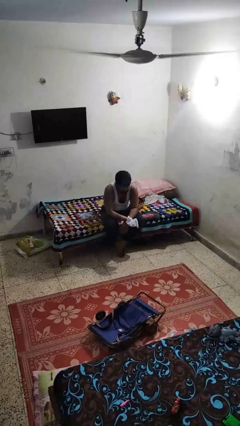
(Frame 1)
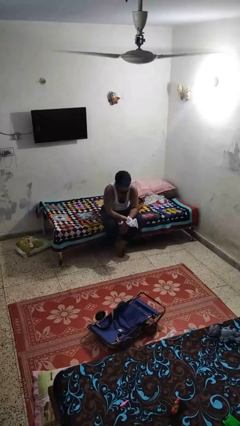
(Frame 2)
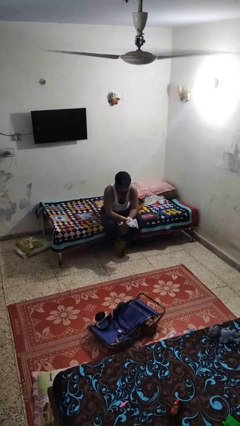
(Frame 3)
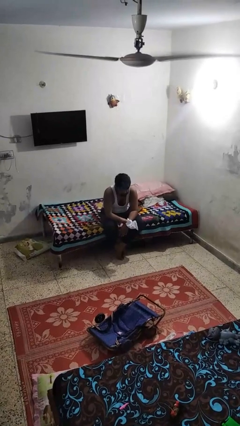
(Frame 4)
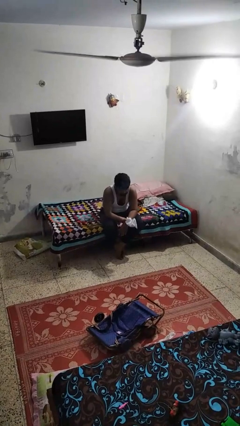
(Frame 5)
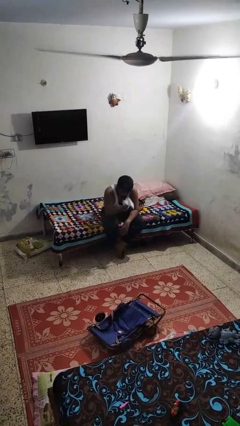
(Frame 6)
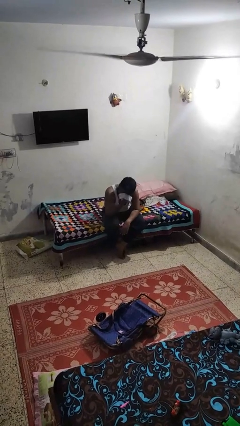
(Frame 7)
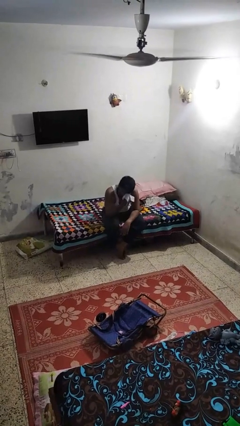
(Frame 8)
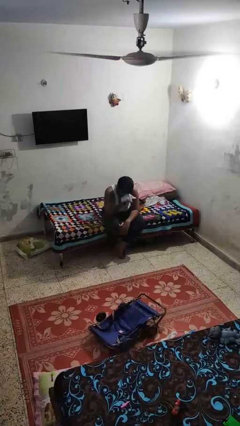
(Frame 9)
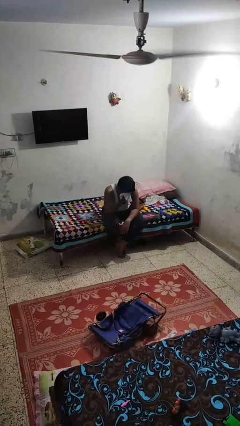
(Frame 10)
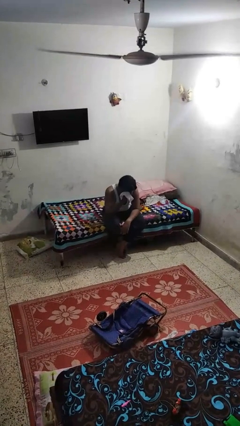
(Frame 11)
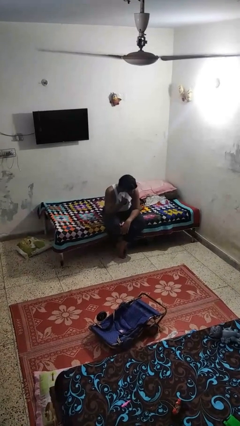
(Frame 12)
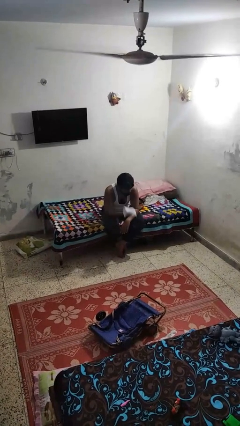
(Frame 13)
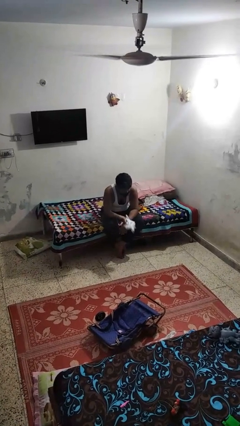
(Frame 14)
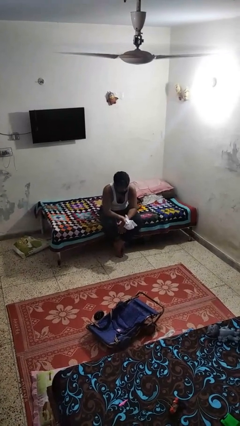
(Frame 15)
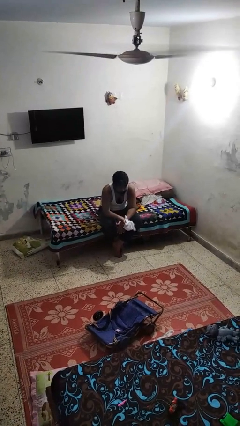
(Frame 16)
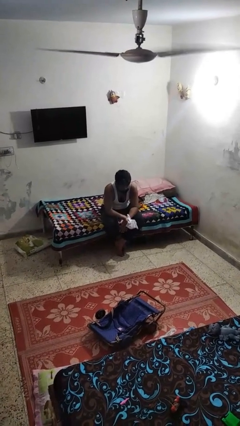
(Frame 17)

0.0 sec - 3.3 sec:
person wipes mouth with napkin

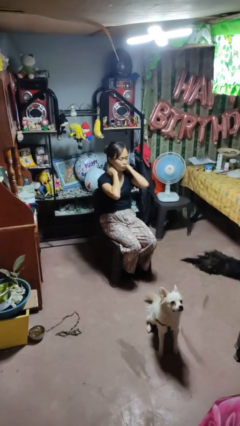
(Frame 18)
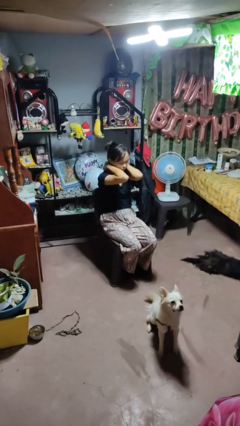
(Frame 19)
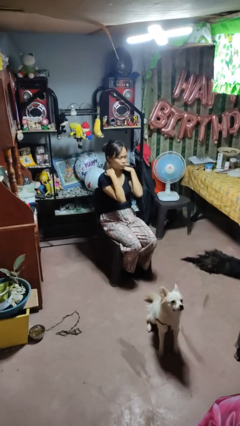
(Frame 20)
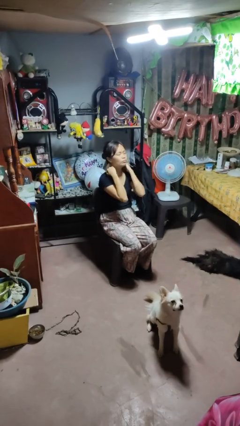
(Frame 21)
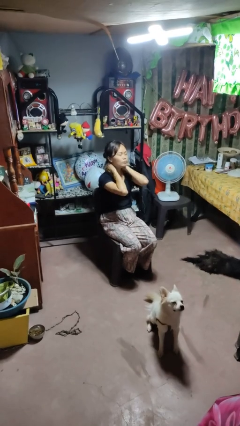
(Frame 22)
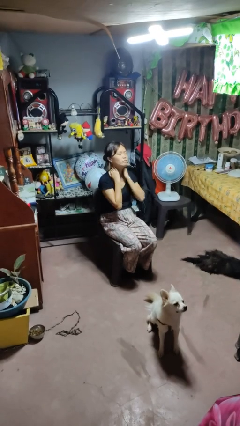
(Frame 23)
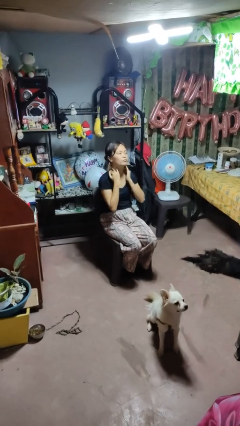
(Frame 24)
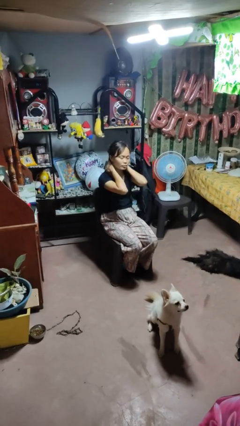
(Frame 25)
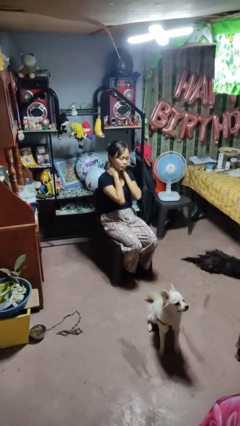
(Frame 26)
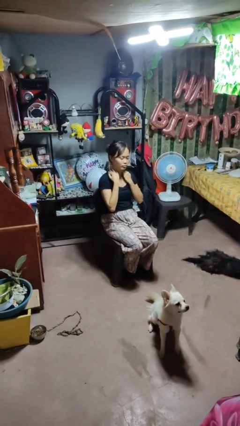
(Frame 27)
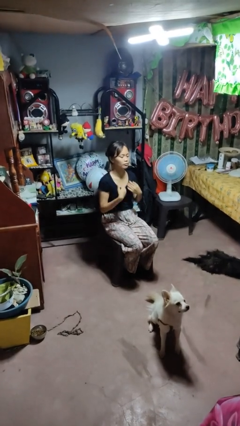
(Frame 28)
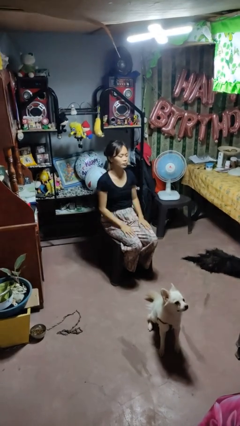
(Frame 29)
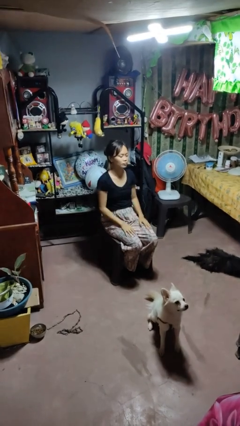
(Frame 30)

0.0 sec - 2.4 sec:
person rubs neck

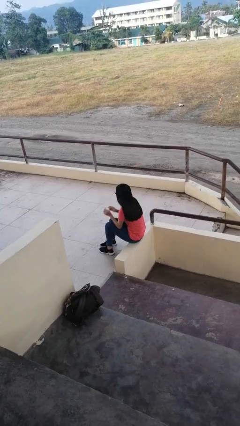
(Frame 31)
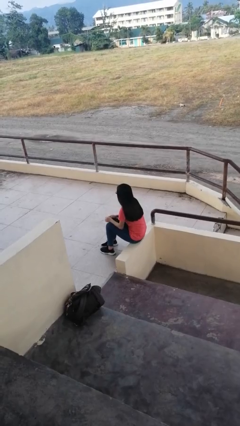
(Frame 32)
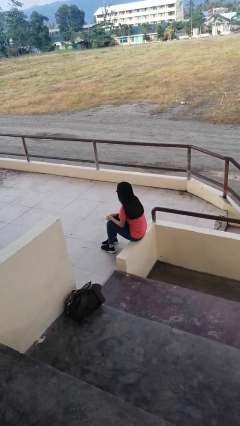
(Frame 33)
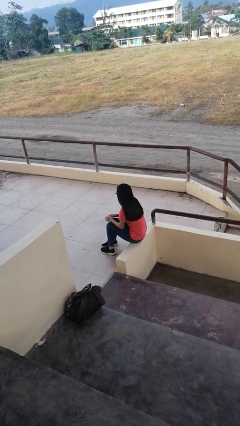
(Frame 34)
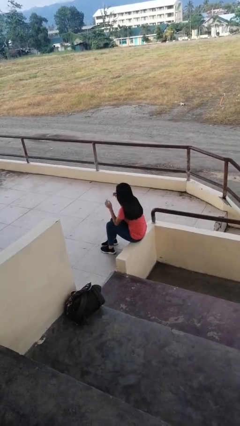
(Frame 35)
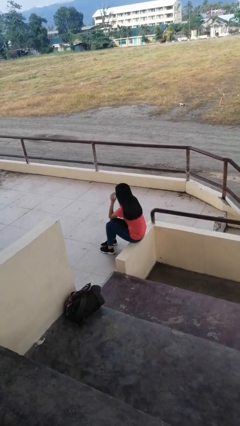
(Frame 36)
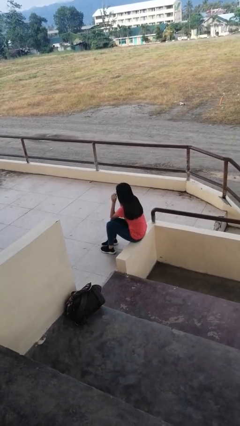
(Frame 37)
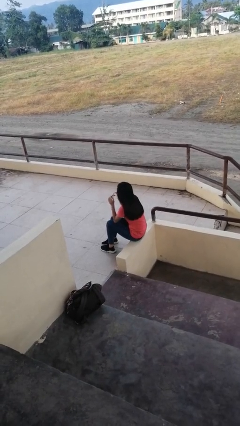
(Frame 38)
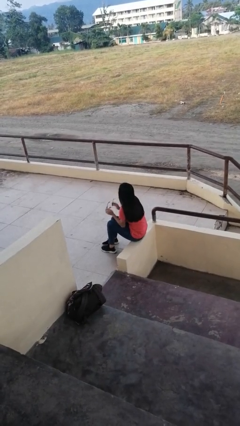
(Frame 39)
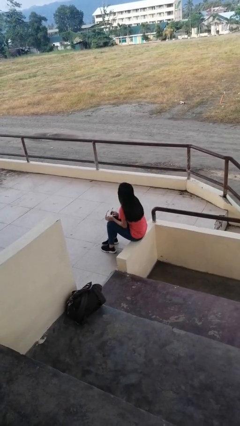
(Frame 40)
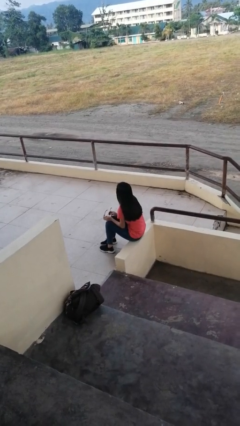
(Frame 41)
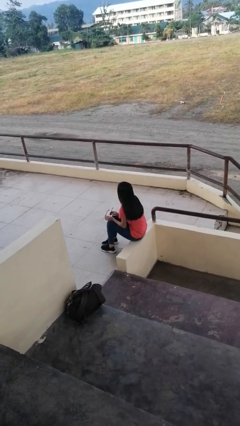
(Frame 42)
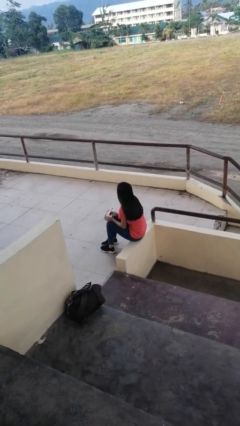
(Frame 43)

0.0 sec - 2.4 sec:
person takes off glasses

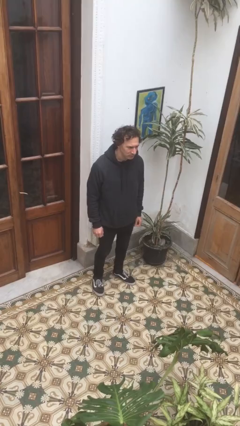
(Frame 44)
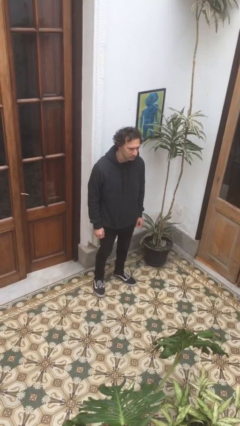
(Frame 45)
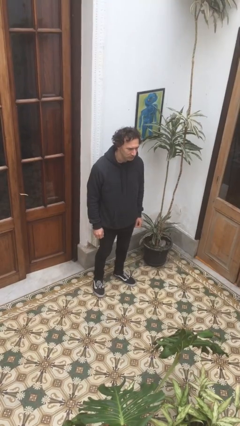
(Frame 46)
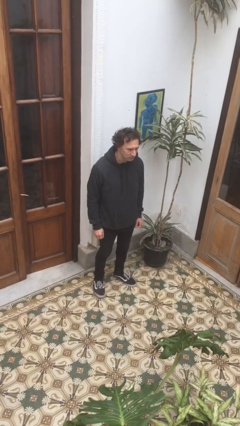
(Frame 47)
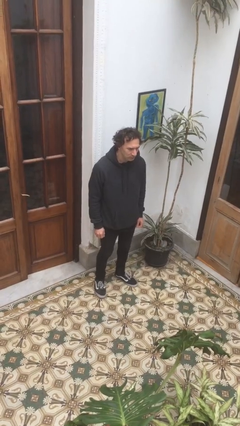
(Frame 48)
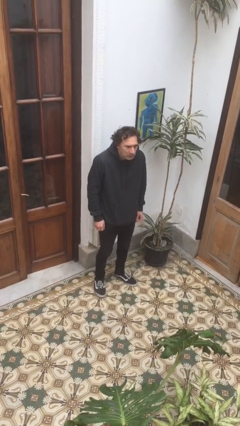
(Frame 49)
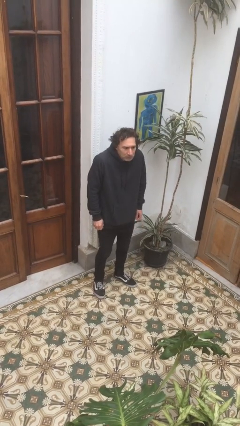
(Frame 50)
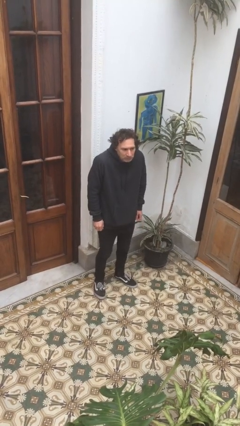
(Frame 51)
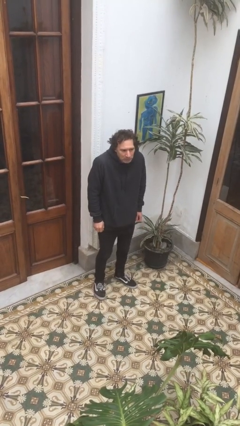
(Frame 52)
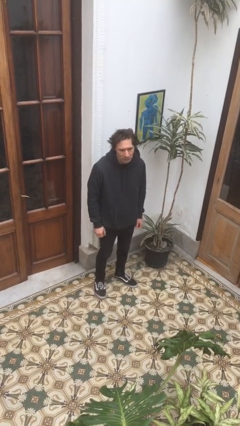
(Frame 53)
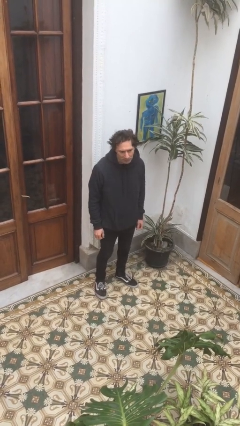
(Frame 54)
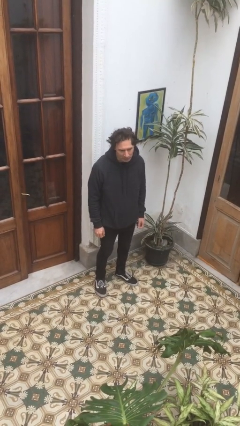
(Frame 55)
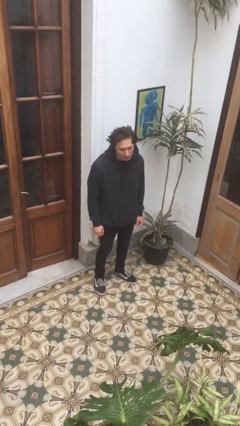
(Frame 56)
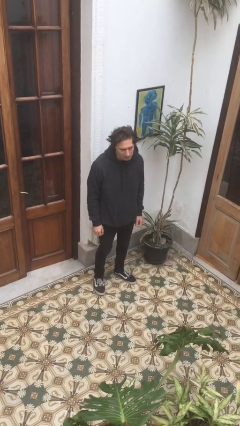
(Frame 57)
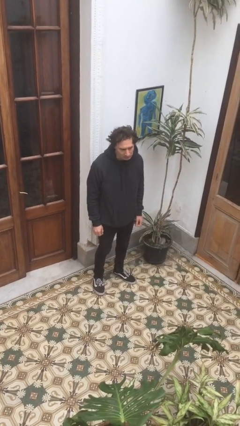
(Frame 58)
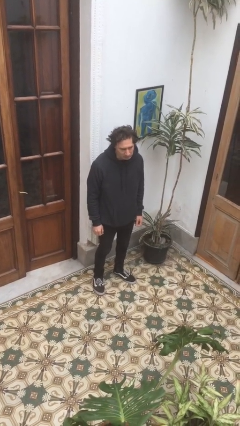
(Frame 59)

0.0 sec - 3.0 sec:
person shrugs

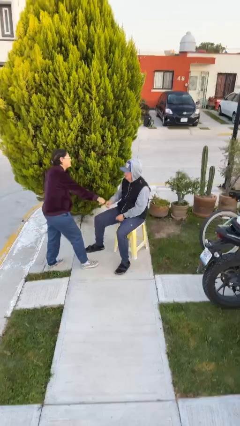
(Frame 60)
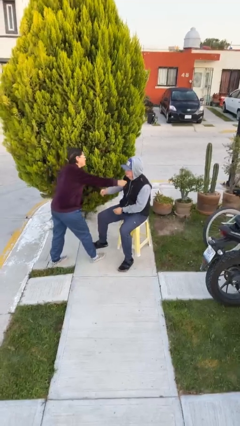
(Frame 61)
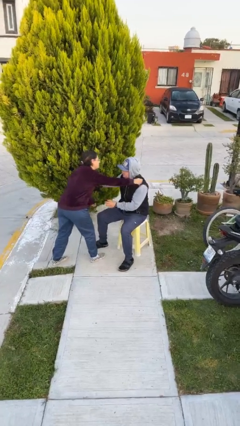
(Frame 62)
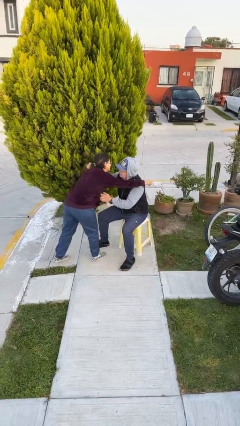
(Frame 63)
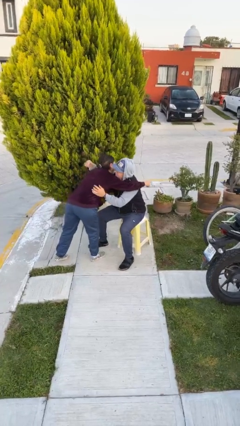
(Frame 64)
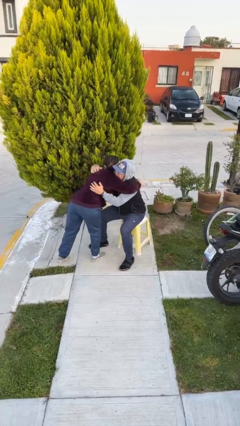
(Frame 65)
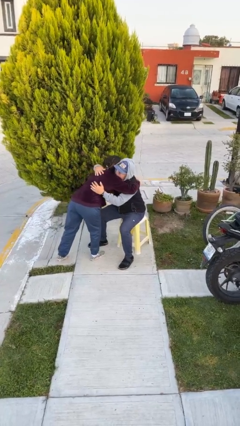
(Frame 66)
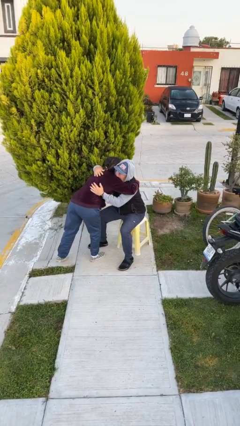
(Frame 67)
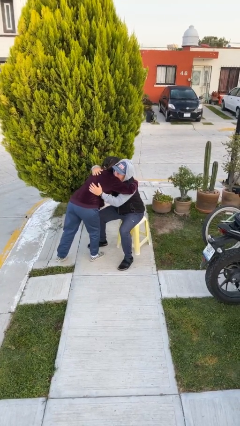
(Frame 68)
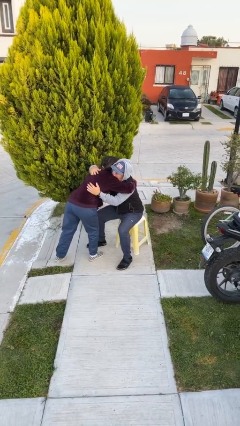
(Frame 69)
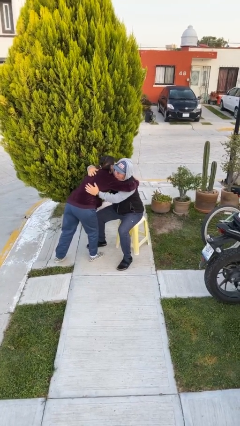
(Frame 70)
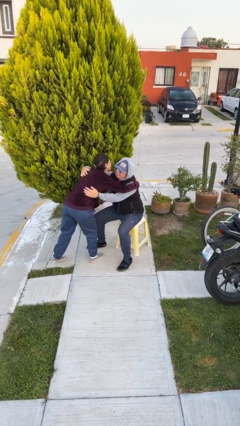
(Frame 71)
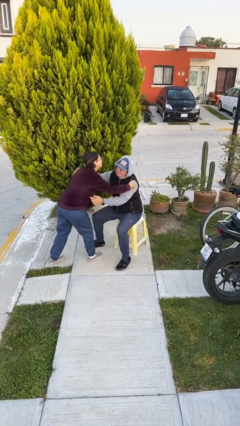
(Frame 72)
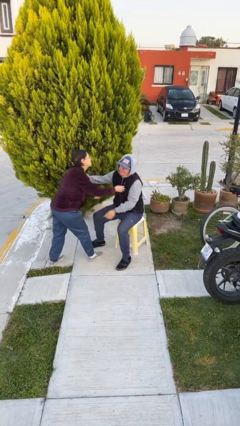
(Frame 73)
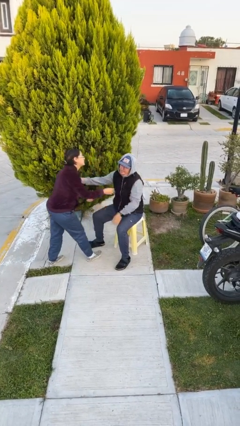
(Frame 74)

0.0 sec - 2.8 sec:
person embraces person

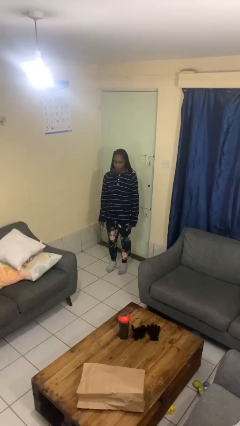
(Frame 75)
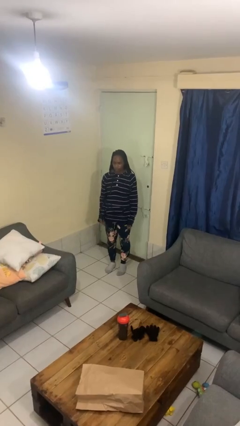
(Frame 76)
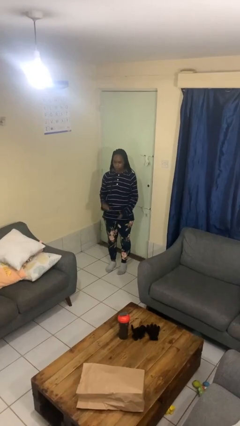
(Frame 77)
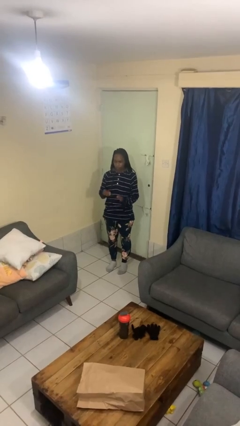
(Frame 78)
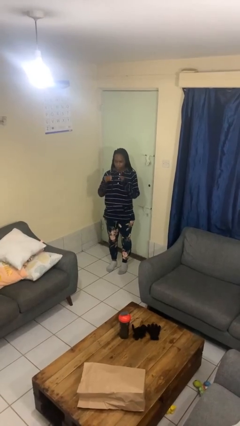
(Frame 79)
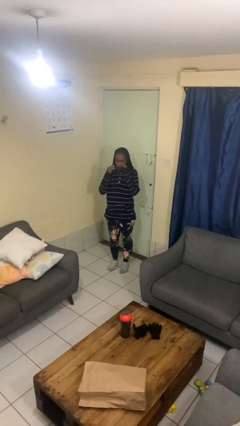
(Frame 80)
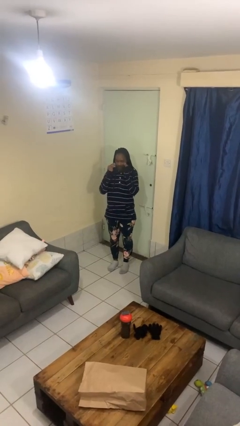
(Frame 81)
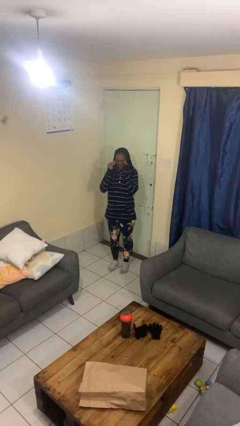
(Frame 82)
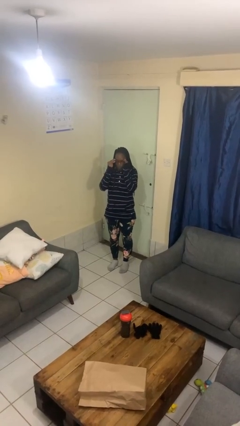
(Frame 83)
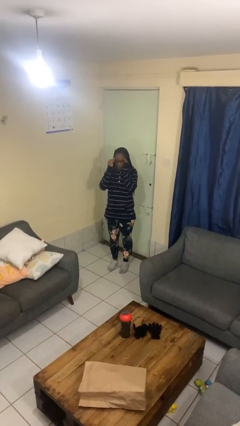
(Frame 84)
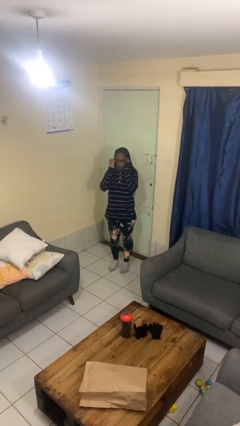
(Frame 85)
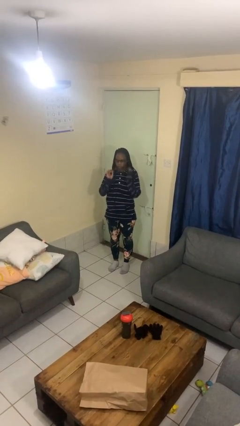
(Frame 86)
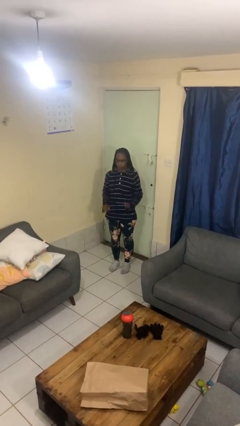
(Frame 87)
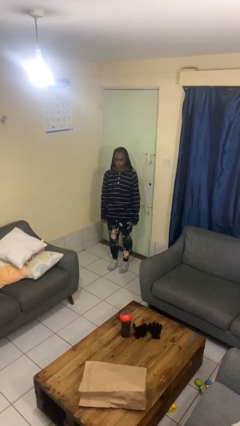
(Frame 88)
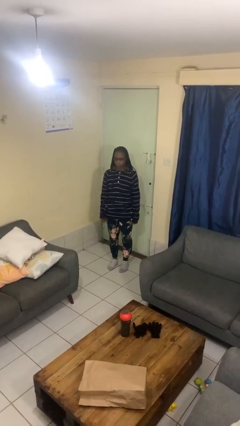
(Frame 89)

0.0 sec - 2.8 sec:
person puts on glasses

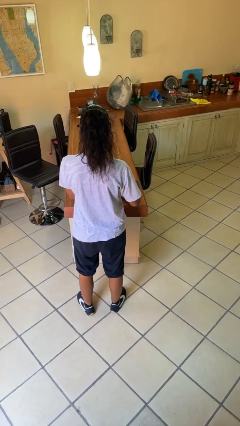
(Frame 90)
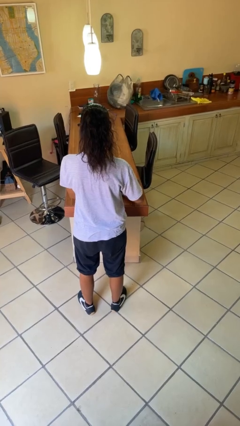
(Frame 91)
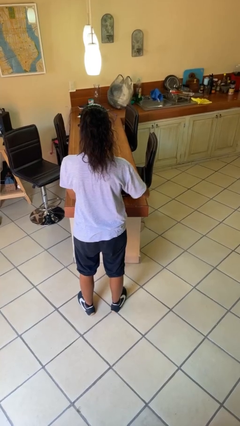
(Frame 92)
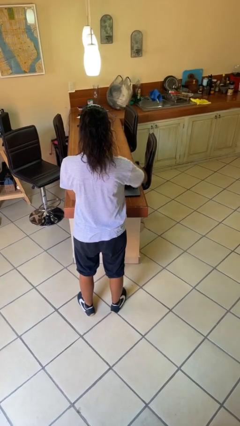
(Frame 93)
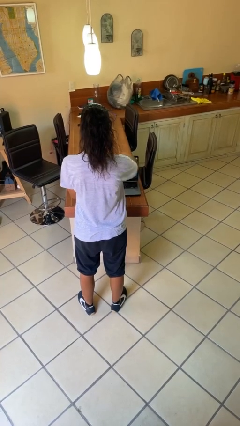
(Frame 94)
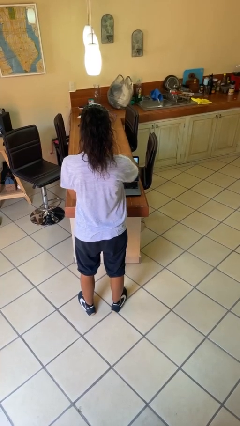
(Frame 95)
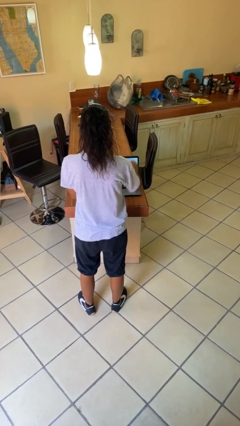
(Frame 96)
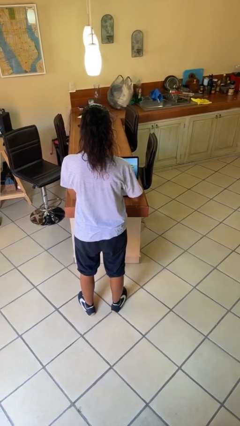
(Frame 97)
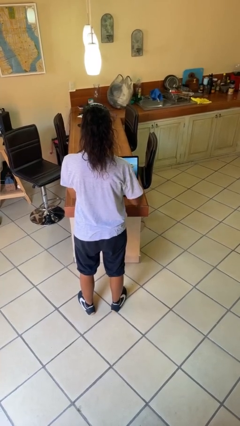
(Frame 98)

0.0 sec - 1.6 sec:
person opens laptop
